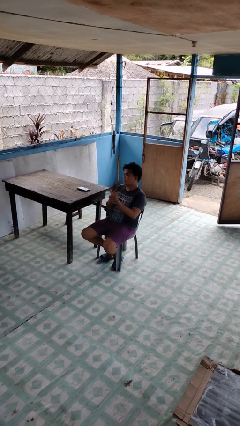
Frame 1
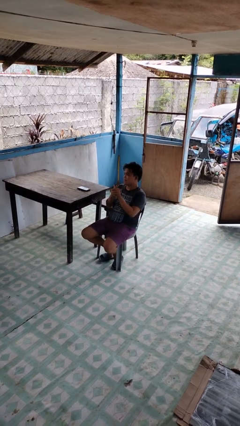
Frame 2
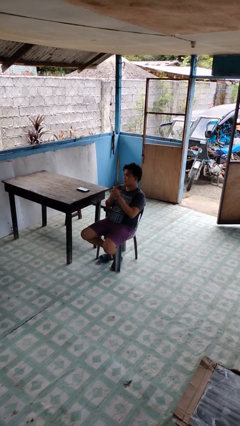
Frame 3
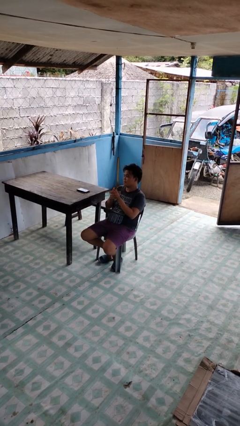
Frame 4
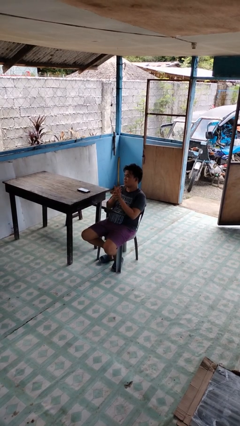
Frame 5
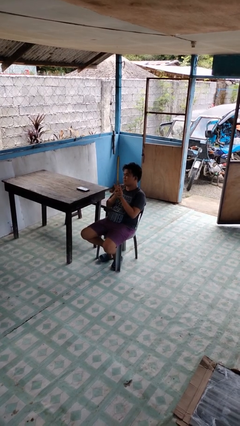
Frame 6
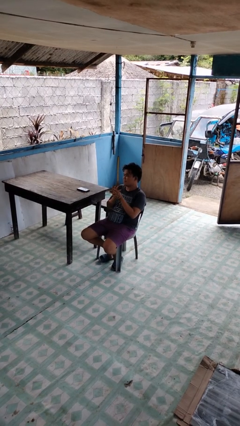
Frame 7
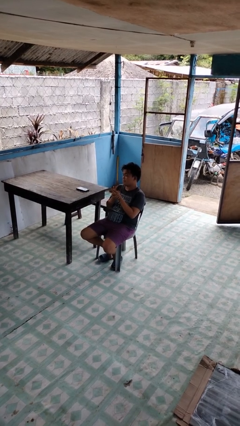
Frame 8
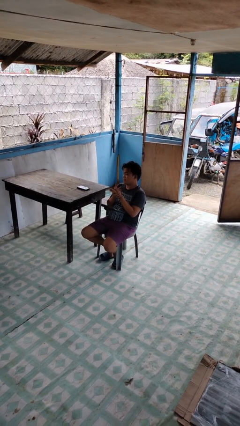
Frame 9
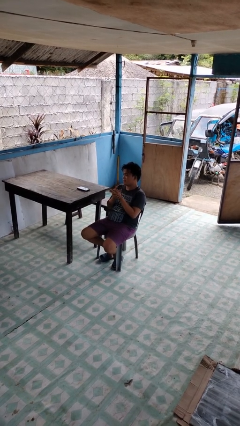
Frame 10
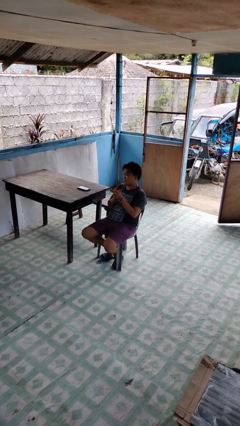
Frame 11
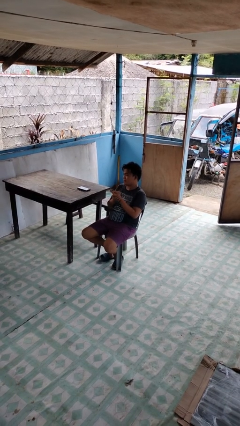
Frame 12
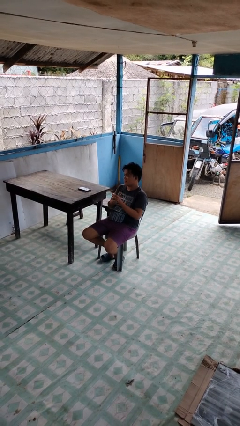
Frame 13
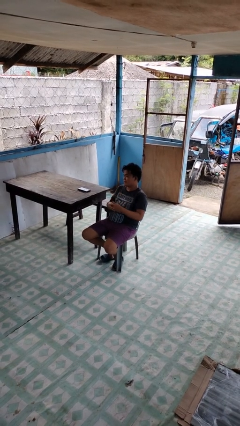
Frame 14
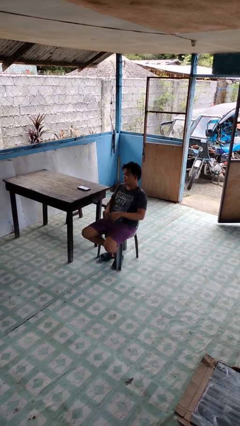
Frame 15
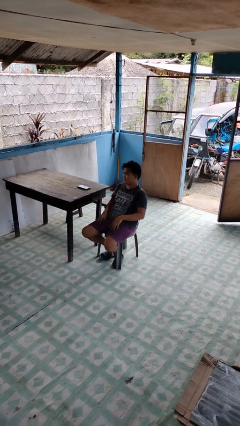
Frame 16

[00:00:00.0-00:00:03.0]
person cracks knuckles

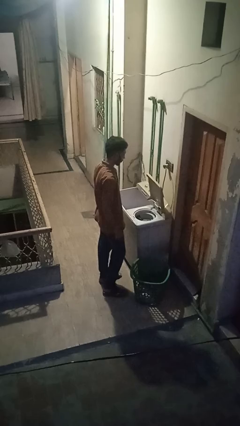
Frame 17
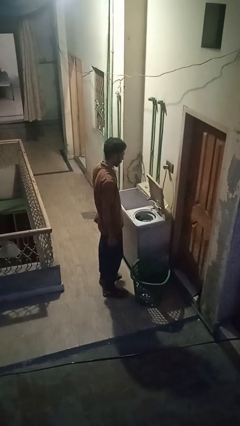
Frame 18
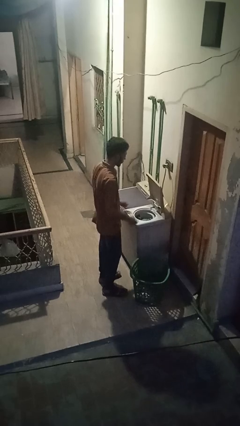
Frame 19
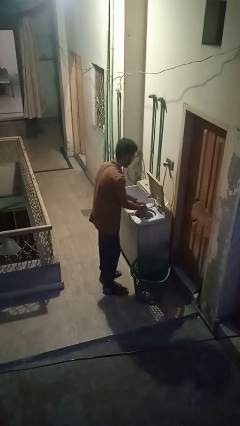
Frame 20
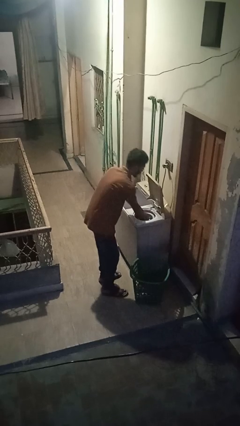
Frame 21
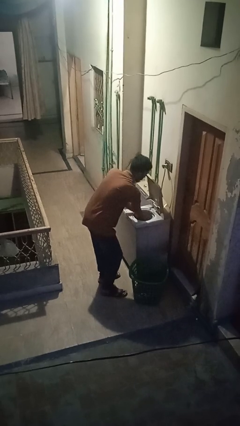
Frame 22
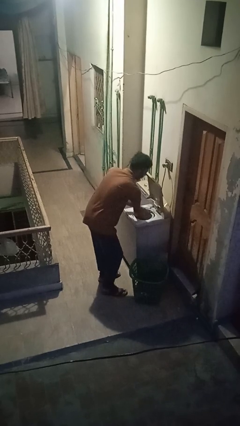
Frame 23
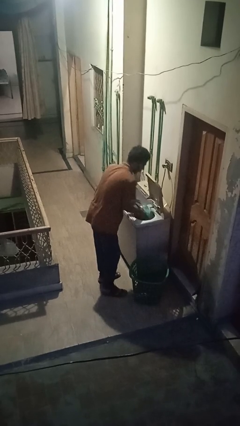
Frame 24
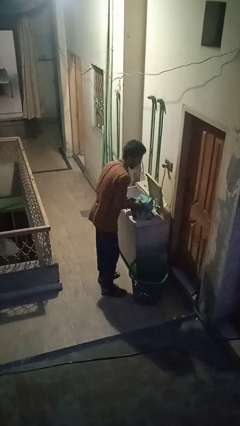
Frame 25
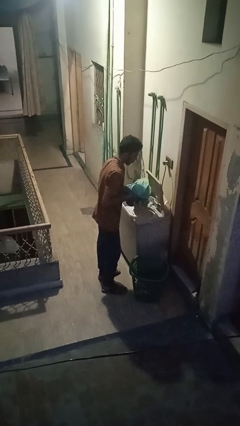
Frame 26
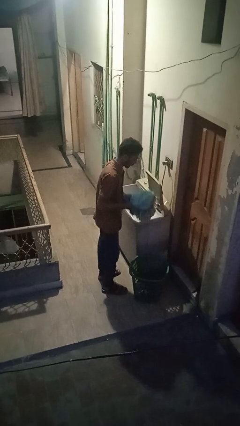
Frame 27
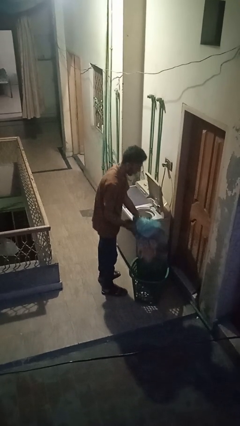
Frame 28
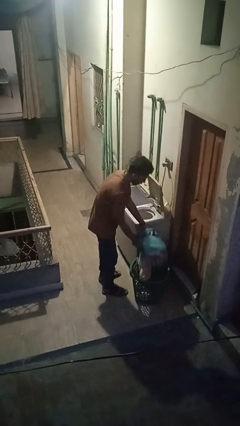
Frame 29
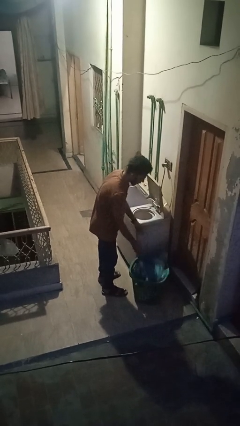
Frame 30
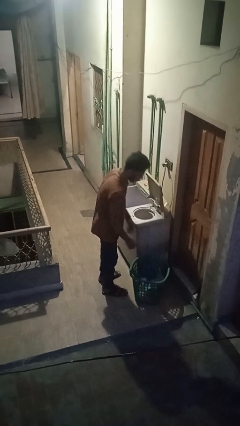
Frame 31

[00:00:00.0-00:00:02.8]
person unloads dryer

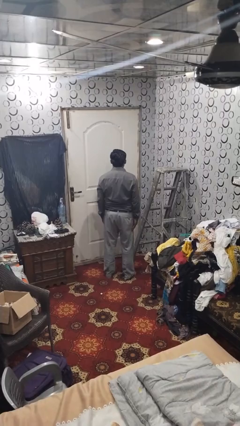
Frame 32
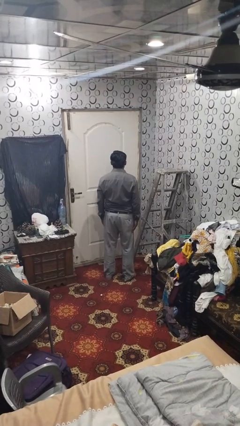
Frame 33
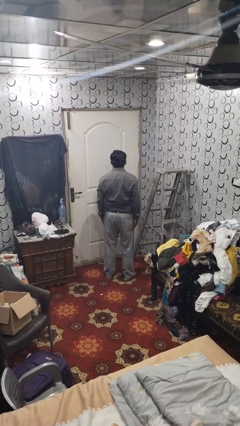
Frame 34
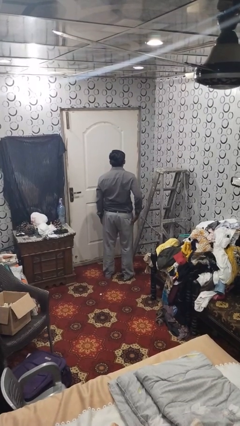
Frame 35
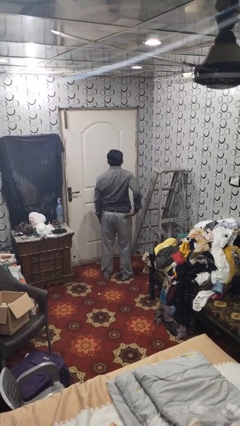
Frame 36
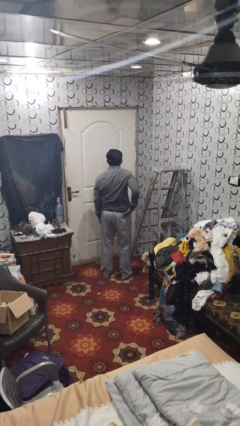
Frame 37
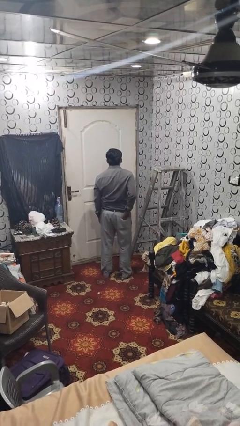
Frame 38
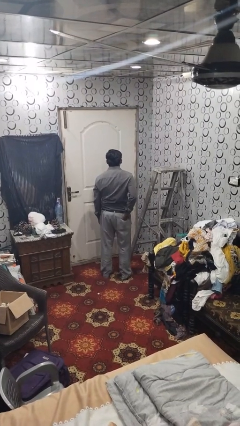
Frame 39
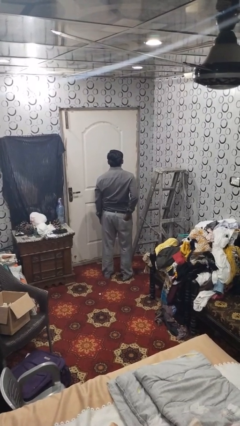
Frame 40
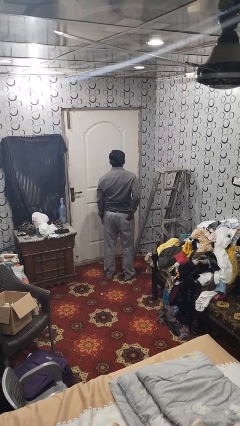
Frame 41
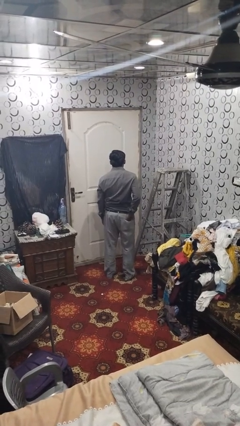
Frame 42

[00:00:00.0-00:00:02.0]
person puts hands in back pockets

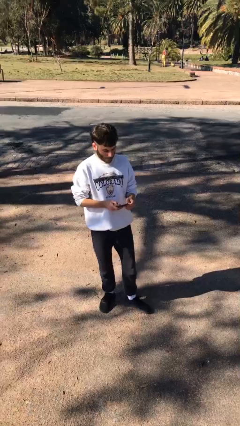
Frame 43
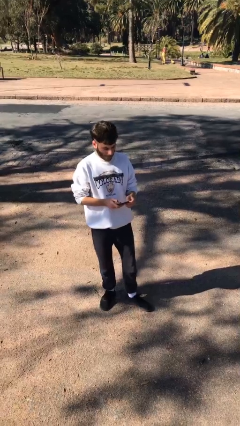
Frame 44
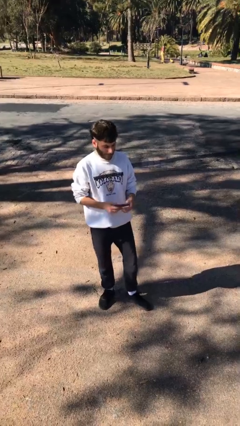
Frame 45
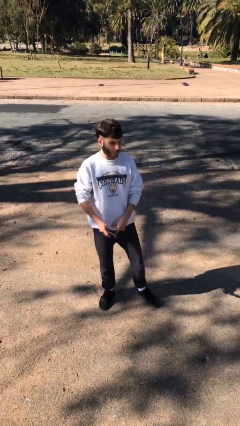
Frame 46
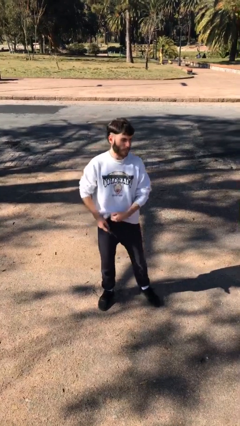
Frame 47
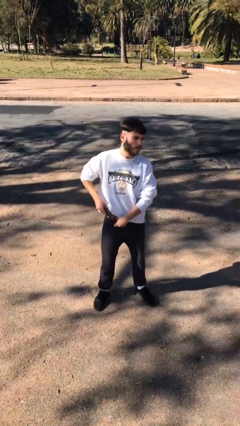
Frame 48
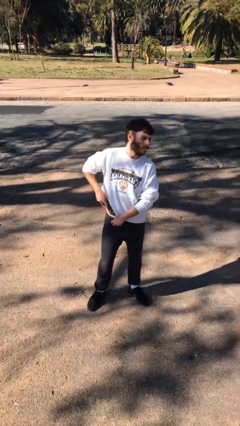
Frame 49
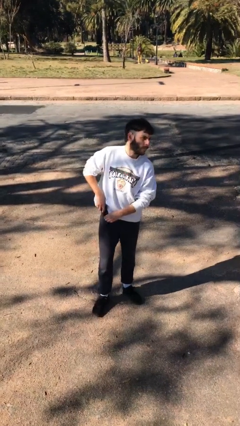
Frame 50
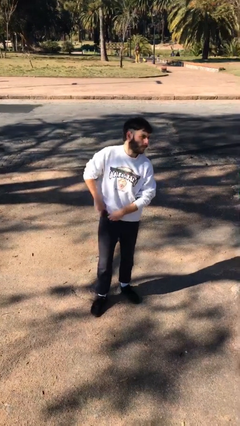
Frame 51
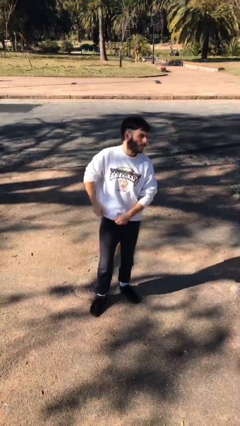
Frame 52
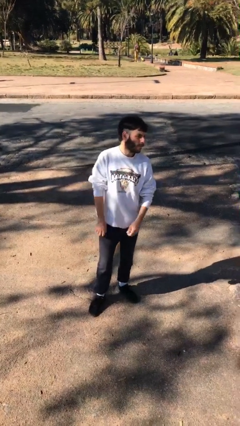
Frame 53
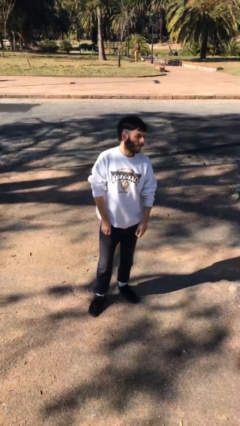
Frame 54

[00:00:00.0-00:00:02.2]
person puts phone into pocket

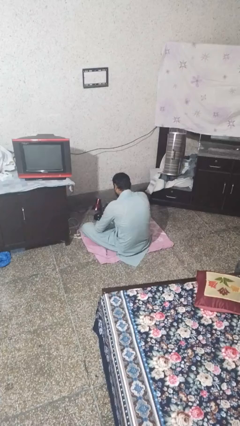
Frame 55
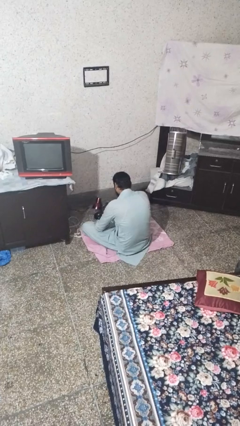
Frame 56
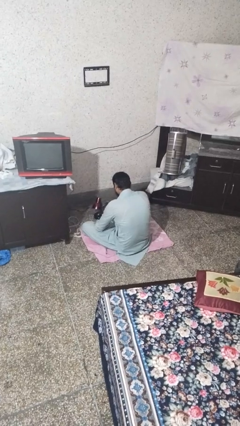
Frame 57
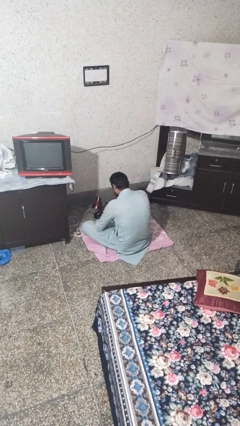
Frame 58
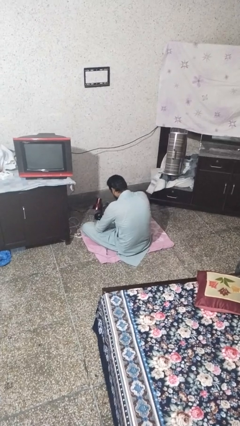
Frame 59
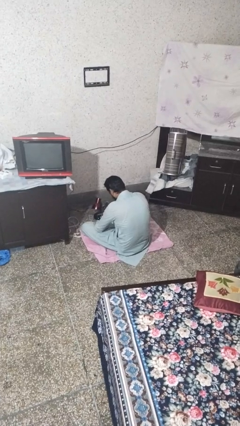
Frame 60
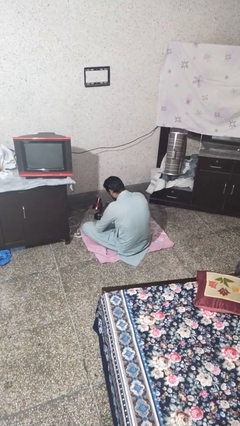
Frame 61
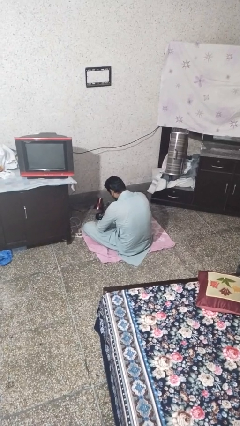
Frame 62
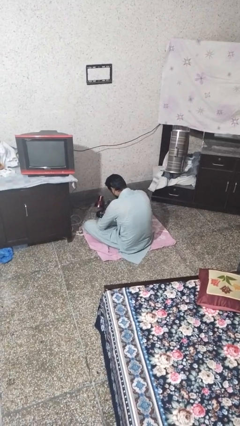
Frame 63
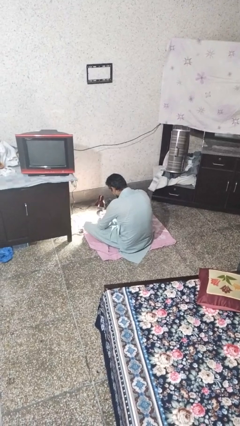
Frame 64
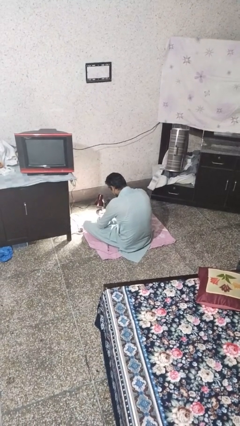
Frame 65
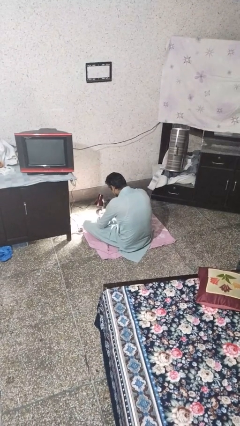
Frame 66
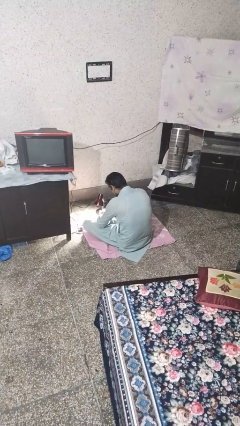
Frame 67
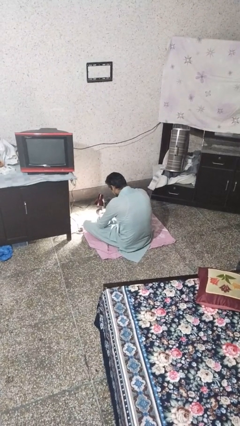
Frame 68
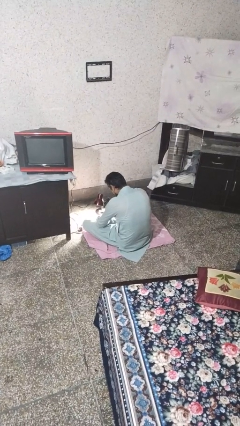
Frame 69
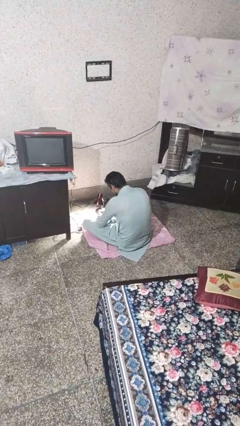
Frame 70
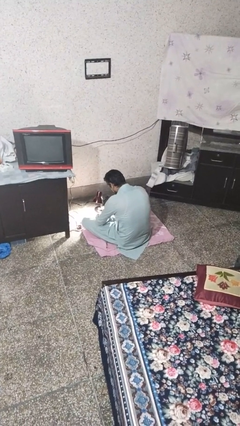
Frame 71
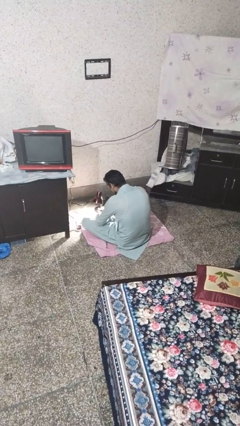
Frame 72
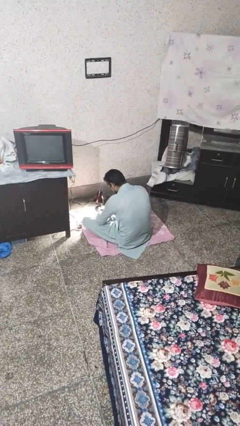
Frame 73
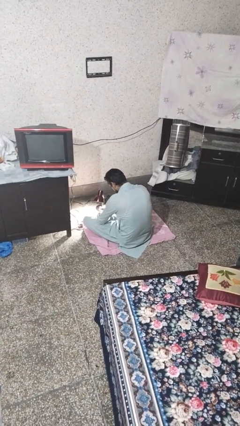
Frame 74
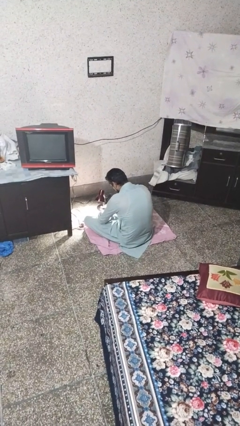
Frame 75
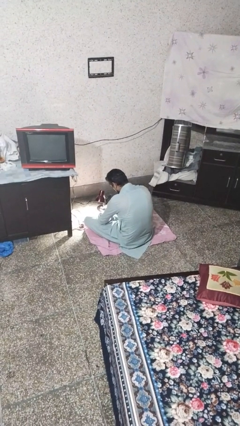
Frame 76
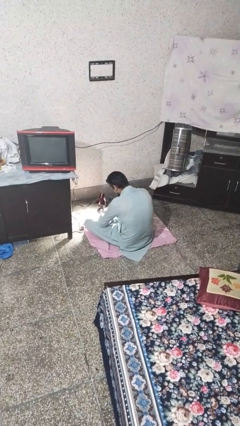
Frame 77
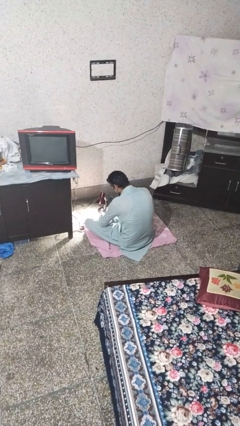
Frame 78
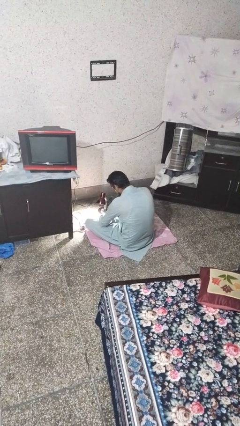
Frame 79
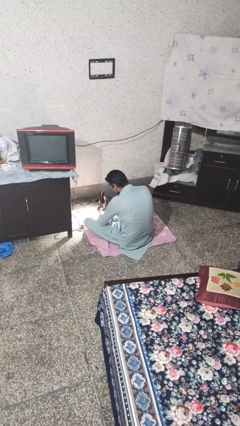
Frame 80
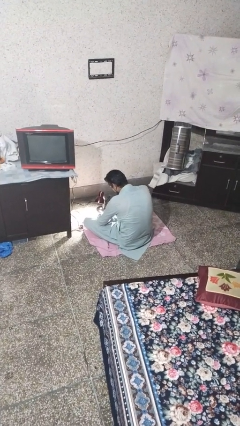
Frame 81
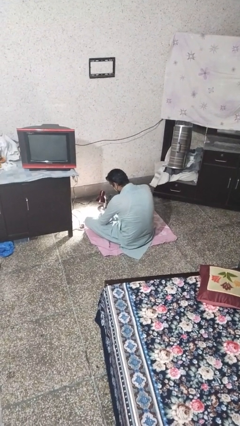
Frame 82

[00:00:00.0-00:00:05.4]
person turns on lamp

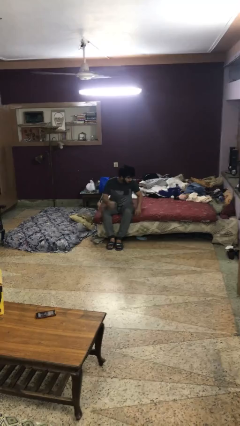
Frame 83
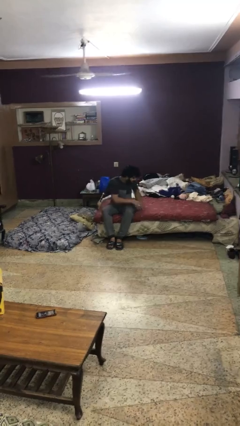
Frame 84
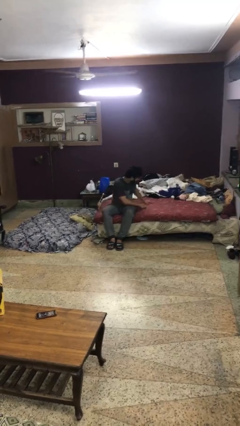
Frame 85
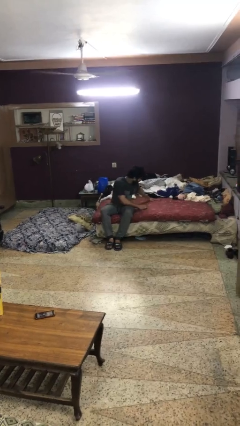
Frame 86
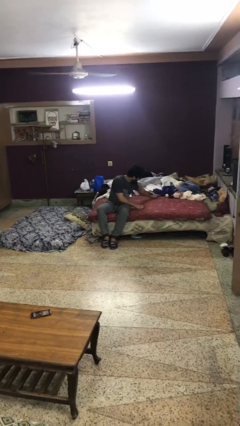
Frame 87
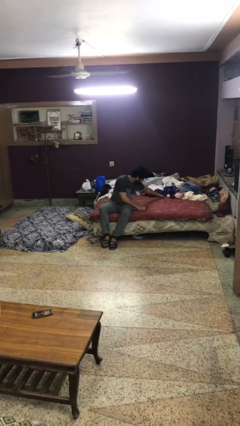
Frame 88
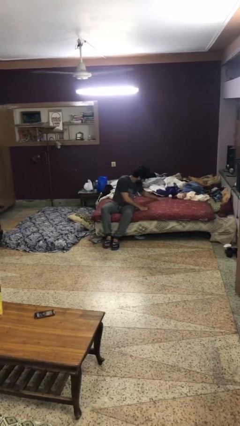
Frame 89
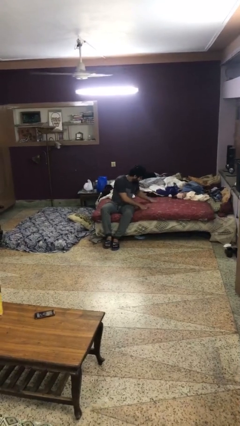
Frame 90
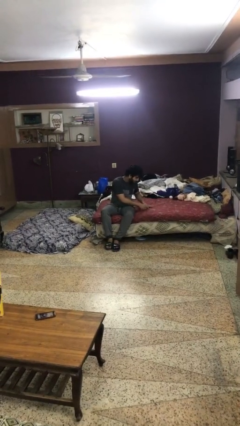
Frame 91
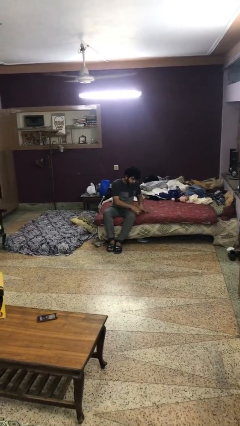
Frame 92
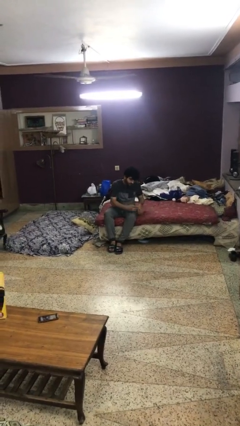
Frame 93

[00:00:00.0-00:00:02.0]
person searches under bed
